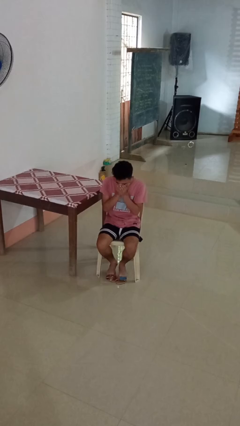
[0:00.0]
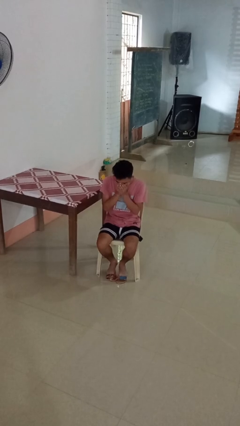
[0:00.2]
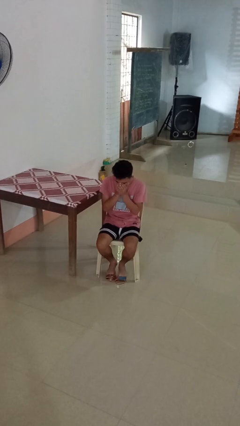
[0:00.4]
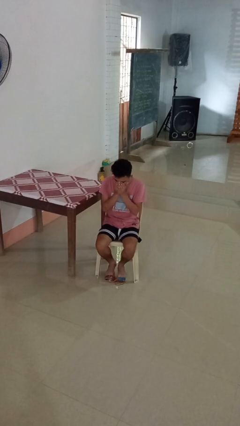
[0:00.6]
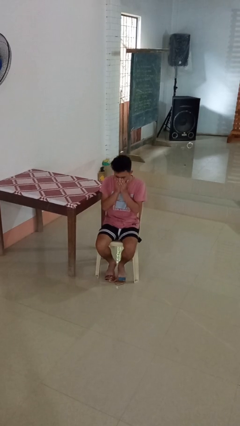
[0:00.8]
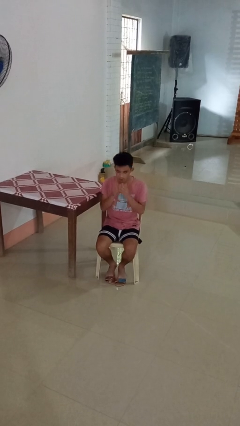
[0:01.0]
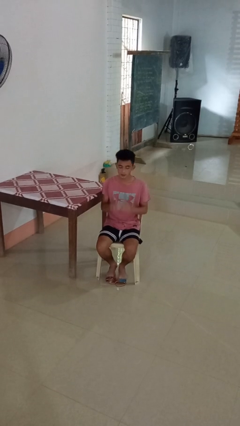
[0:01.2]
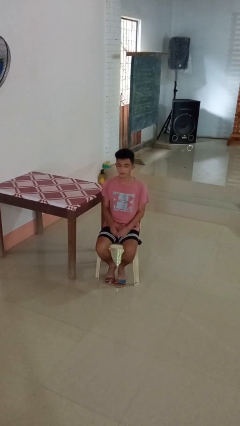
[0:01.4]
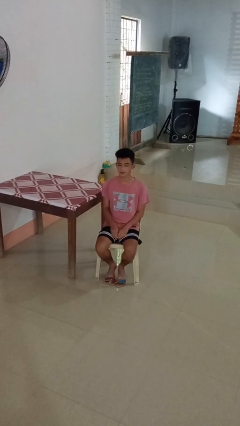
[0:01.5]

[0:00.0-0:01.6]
person sneezes into hand

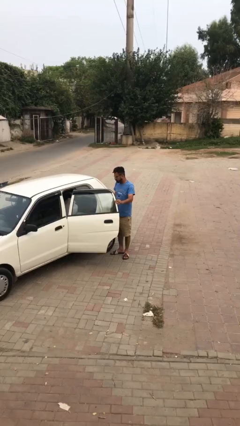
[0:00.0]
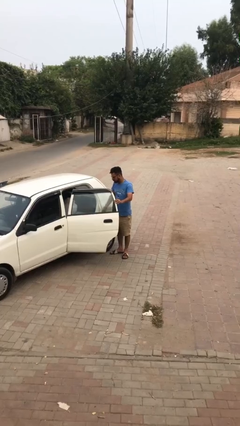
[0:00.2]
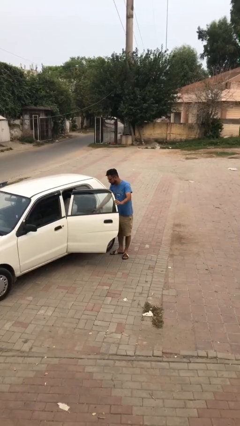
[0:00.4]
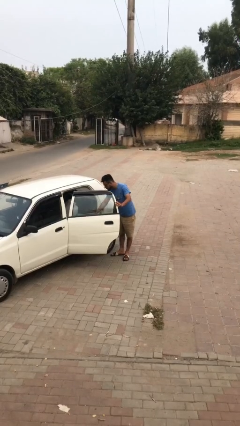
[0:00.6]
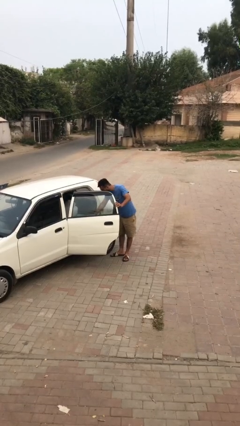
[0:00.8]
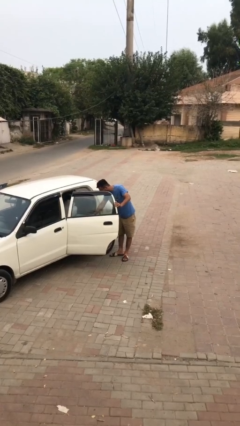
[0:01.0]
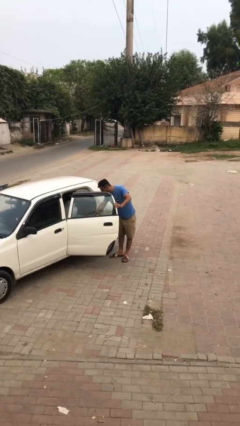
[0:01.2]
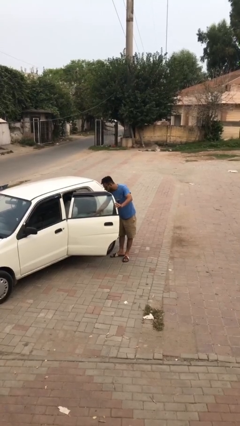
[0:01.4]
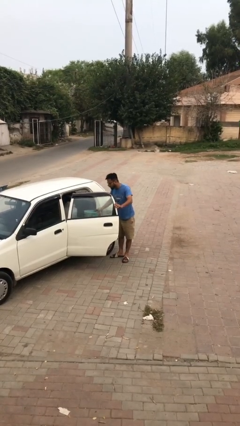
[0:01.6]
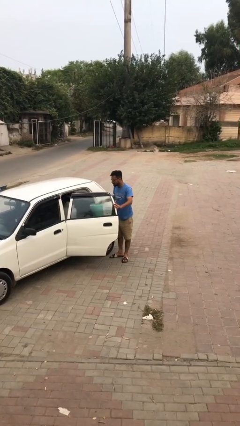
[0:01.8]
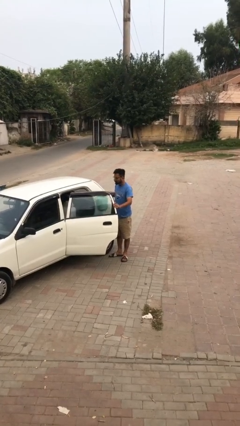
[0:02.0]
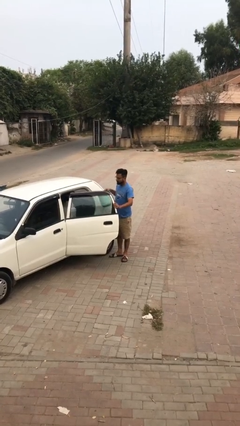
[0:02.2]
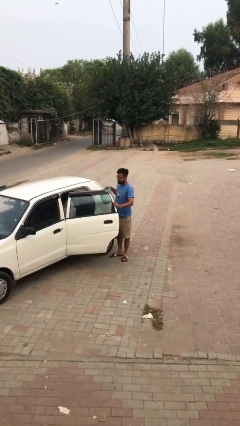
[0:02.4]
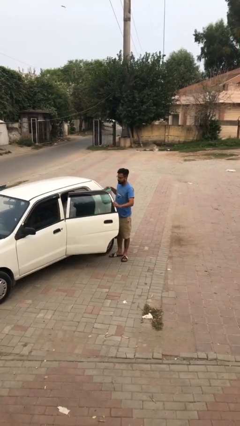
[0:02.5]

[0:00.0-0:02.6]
person unloads car

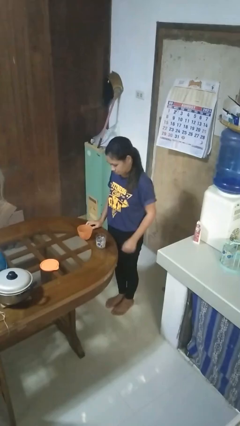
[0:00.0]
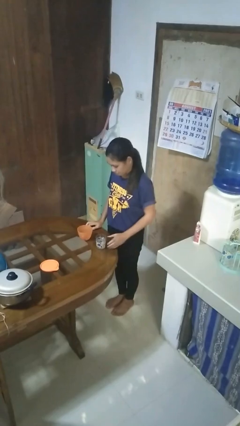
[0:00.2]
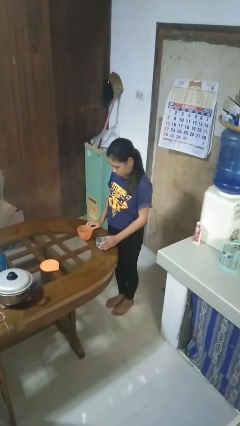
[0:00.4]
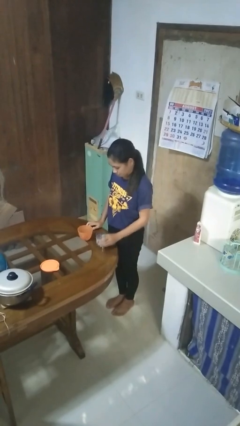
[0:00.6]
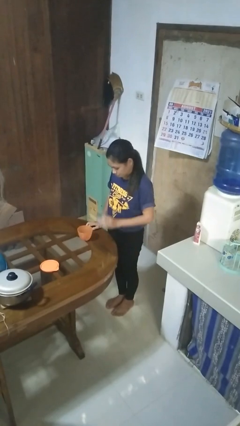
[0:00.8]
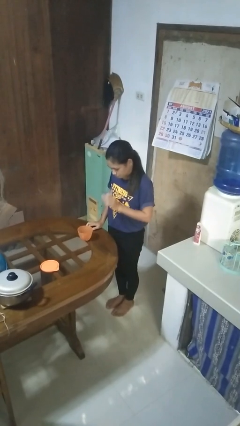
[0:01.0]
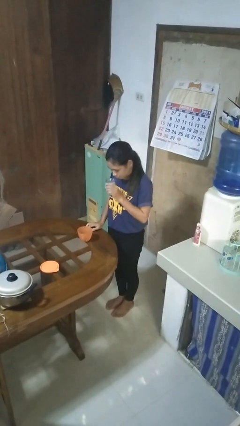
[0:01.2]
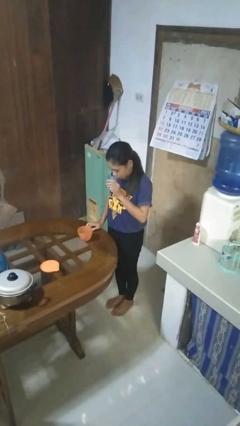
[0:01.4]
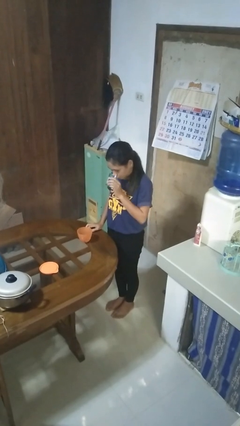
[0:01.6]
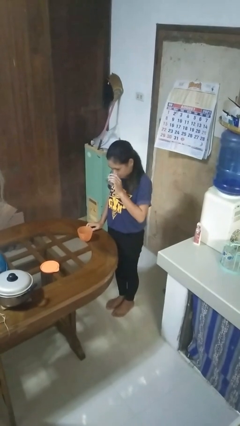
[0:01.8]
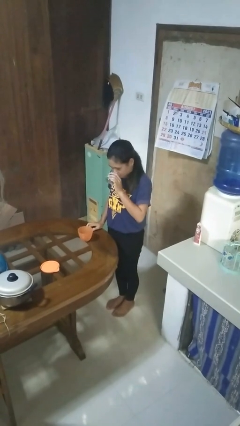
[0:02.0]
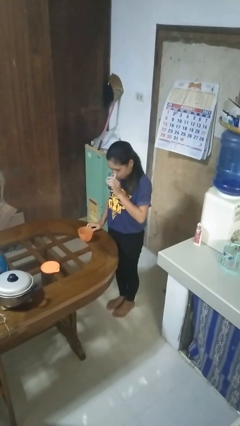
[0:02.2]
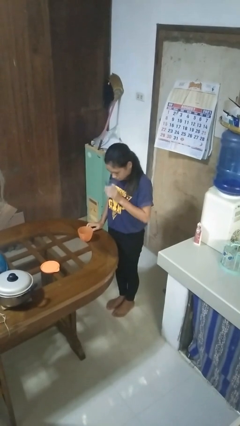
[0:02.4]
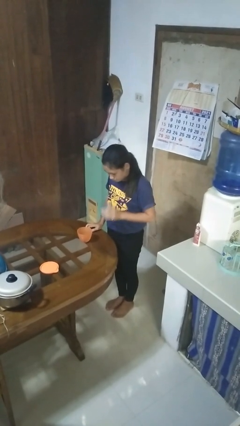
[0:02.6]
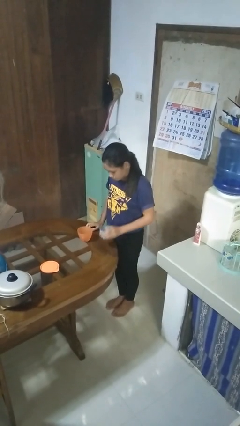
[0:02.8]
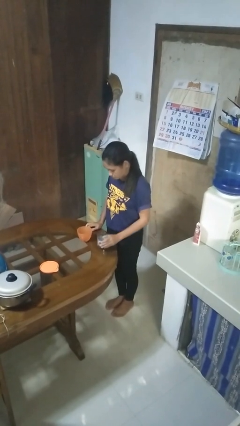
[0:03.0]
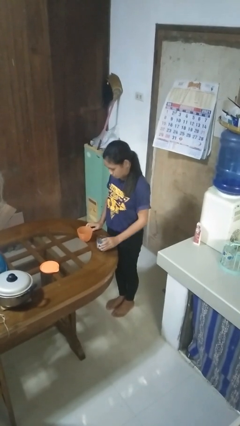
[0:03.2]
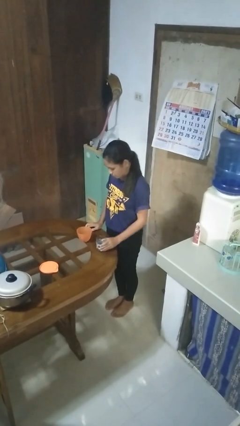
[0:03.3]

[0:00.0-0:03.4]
person drinks from cup

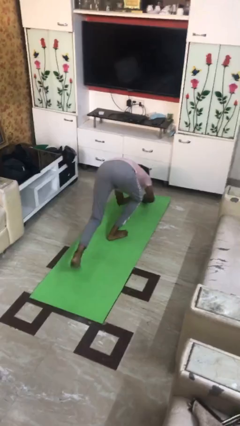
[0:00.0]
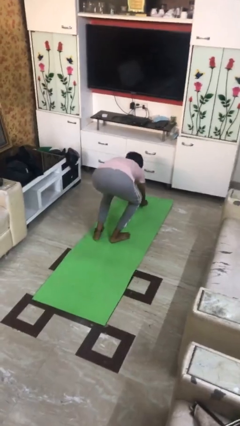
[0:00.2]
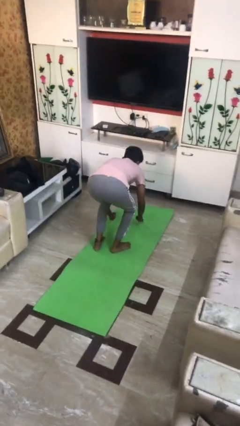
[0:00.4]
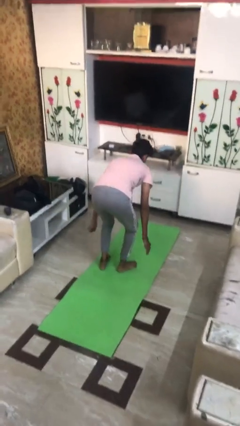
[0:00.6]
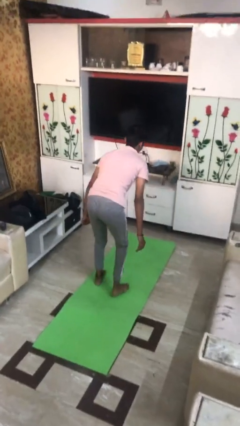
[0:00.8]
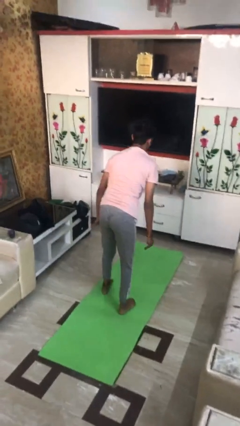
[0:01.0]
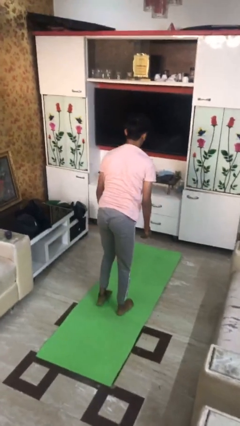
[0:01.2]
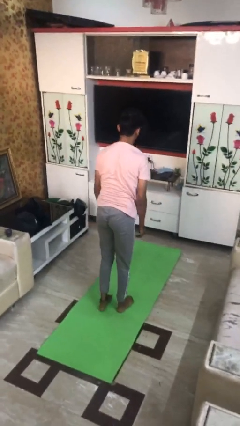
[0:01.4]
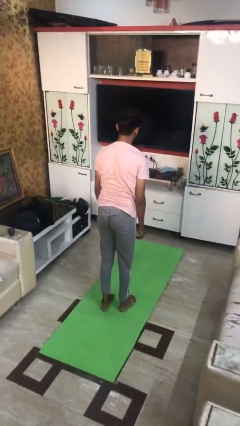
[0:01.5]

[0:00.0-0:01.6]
person stands up from floor

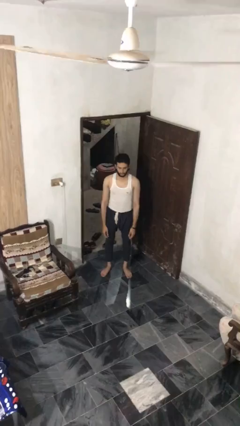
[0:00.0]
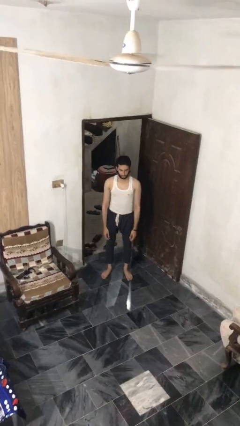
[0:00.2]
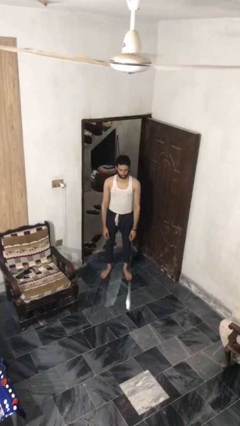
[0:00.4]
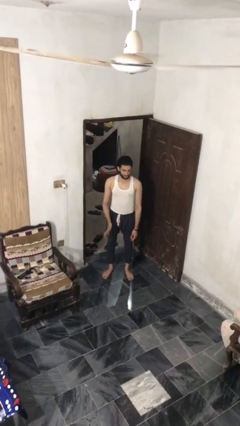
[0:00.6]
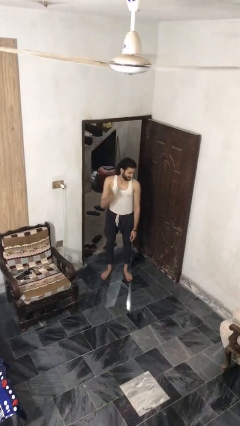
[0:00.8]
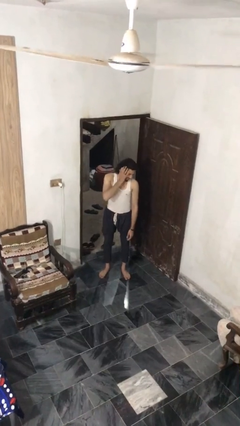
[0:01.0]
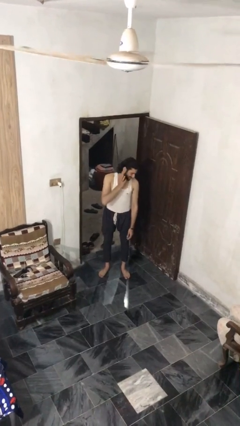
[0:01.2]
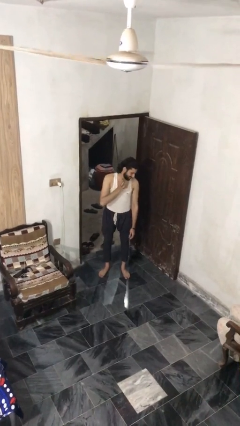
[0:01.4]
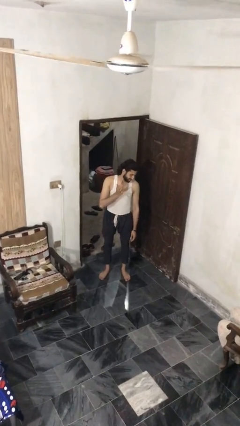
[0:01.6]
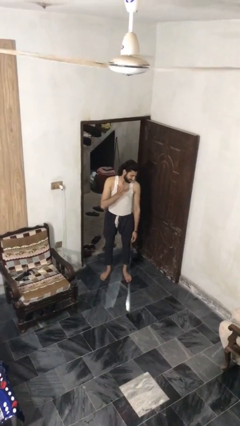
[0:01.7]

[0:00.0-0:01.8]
person swats bug

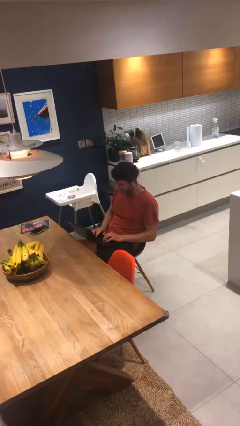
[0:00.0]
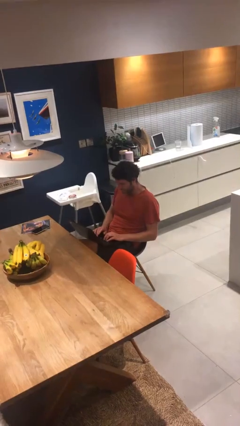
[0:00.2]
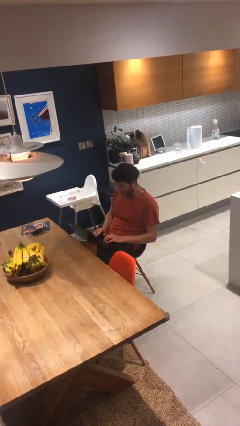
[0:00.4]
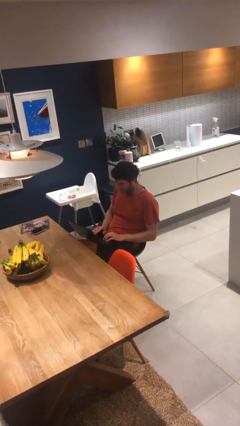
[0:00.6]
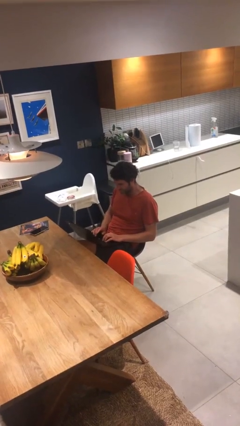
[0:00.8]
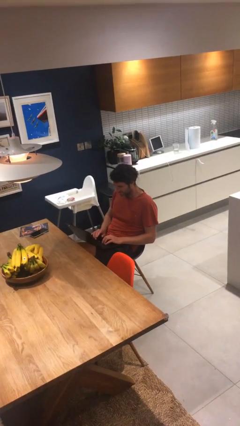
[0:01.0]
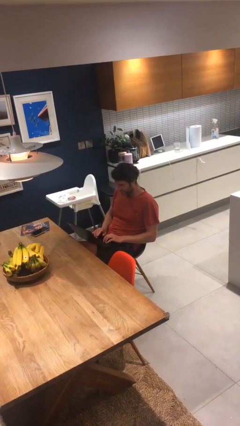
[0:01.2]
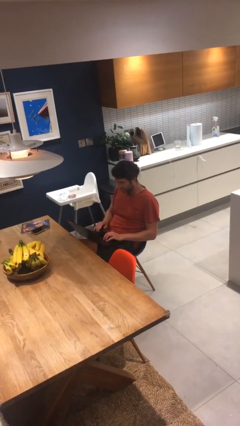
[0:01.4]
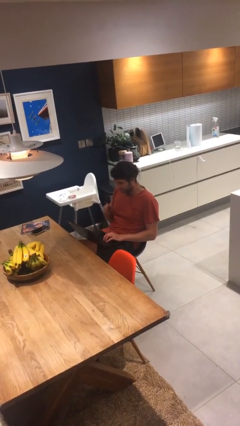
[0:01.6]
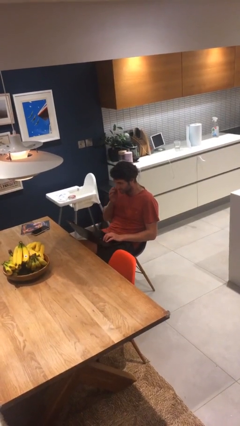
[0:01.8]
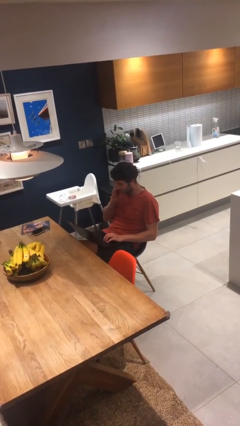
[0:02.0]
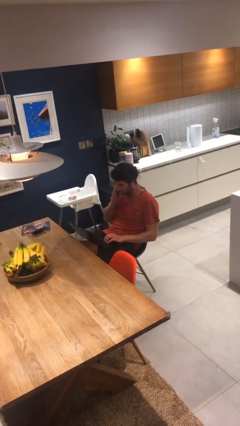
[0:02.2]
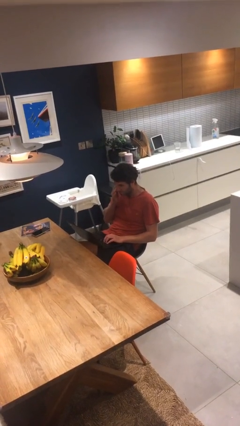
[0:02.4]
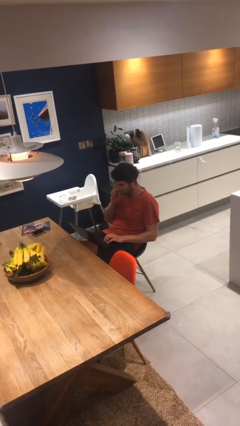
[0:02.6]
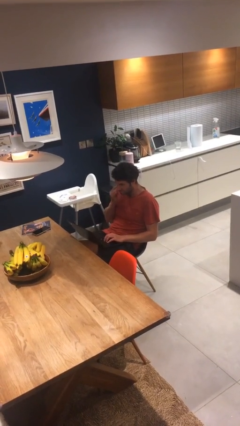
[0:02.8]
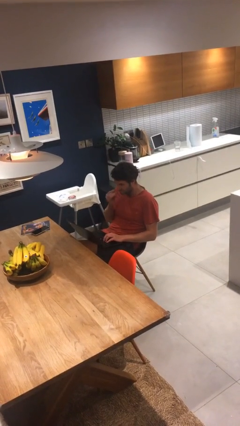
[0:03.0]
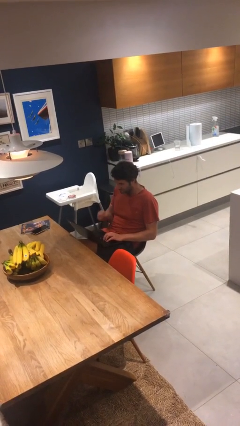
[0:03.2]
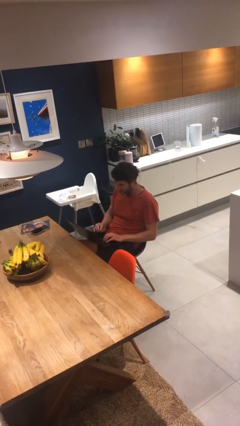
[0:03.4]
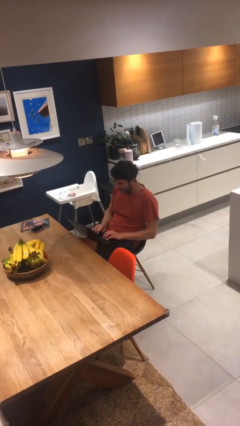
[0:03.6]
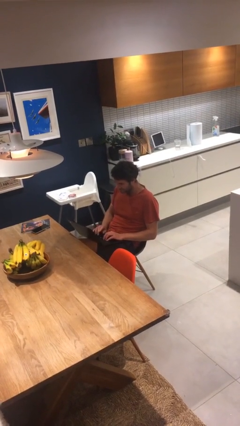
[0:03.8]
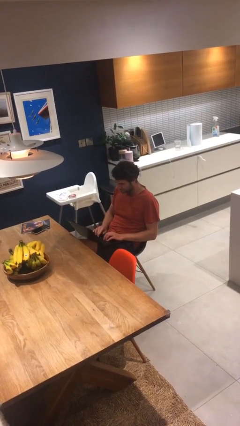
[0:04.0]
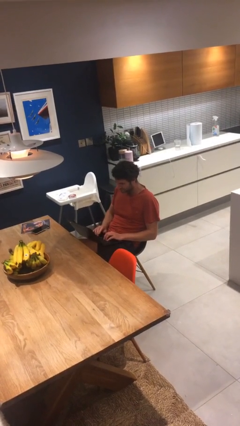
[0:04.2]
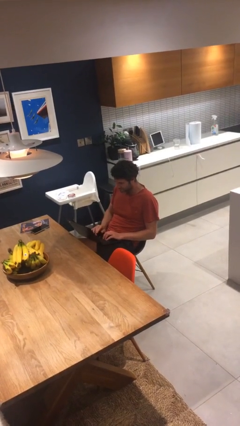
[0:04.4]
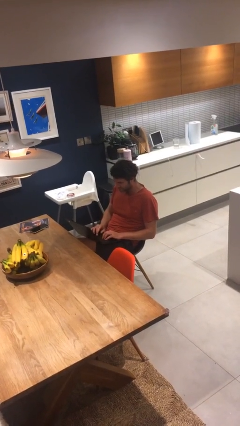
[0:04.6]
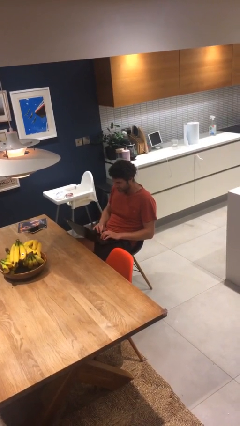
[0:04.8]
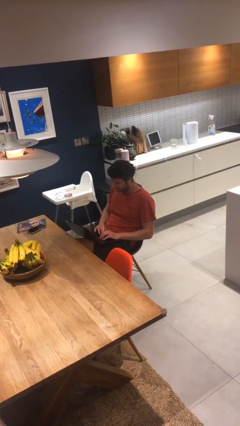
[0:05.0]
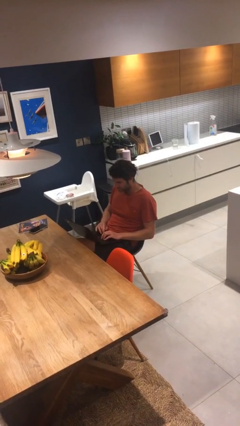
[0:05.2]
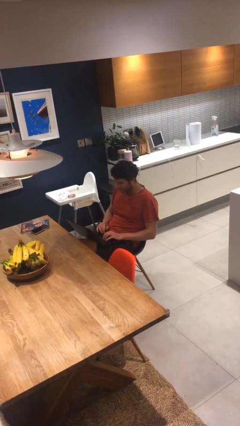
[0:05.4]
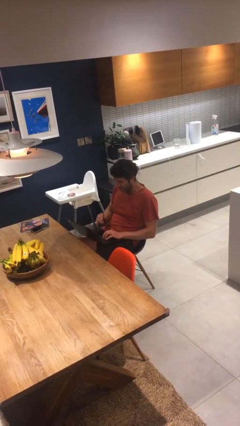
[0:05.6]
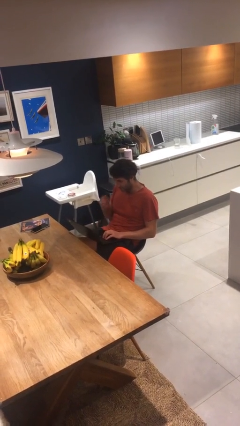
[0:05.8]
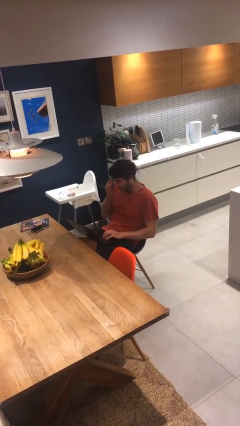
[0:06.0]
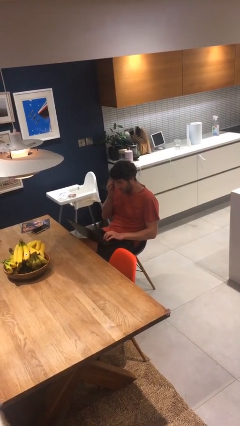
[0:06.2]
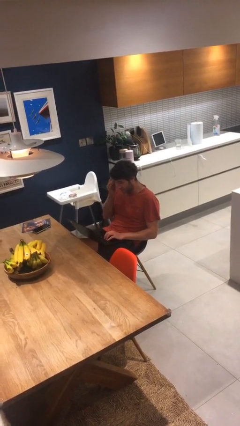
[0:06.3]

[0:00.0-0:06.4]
person interacts with laptop
